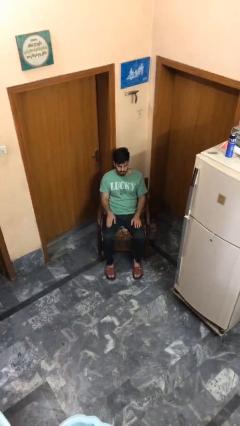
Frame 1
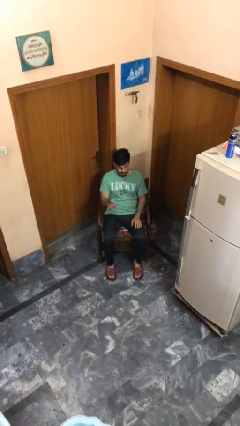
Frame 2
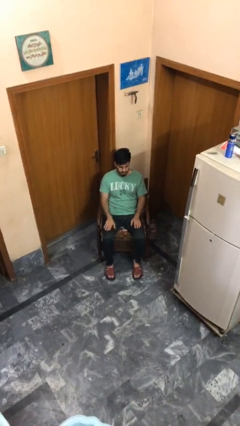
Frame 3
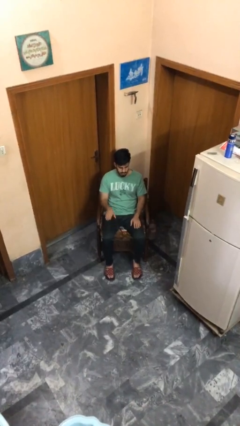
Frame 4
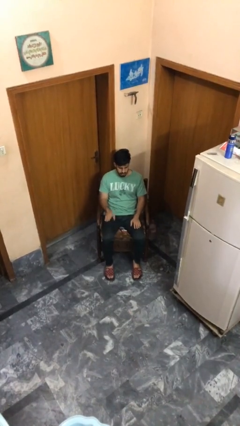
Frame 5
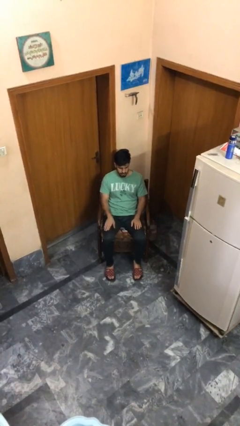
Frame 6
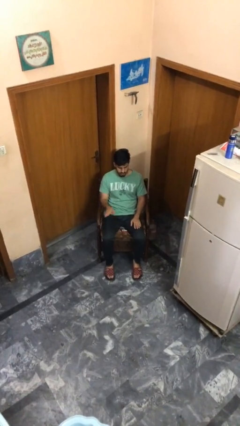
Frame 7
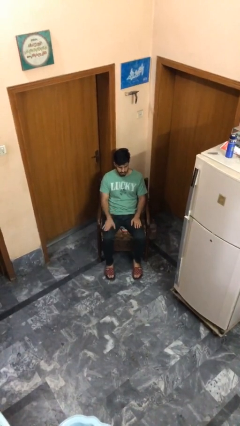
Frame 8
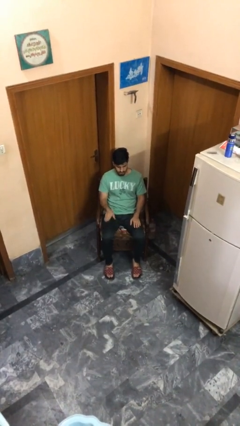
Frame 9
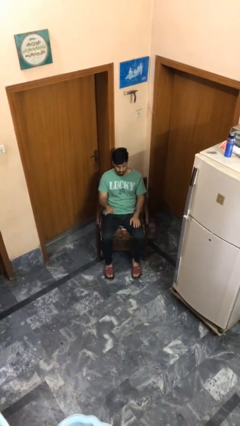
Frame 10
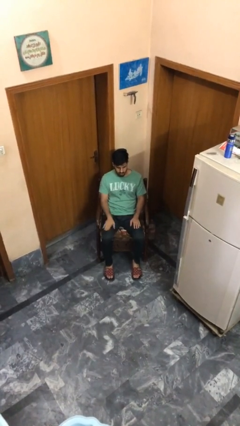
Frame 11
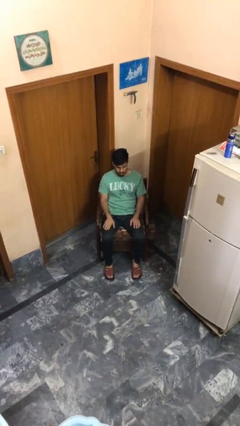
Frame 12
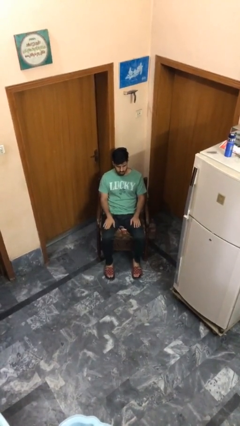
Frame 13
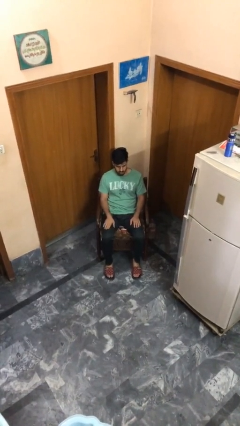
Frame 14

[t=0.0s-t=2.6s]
person slaps hands on thighs

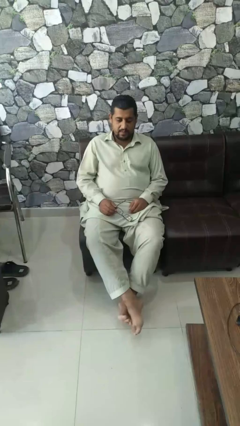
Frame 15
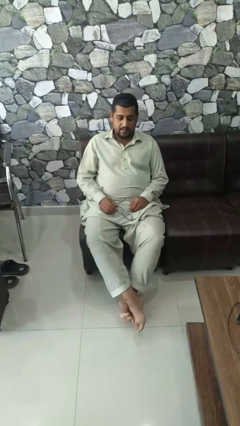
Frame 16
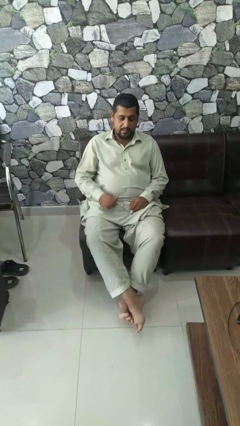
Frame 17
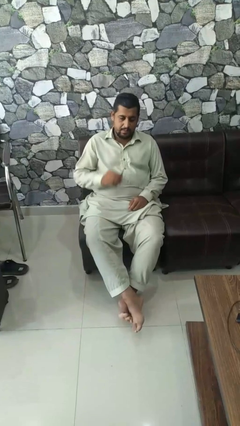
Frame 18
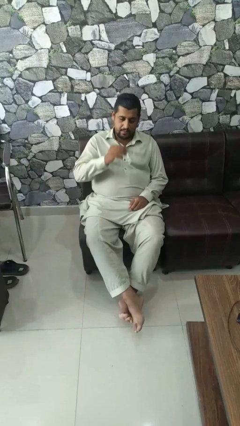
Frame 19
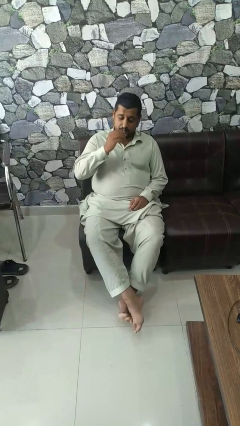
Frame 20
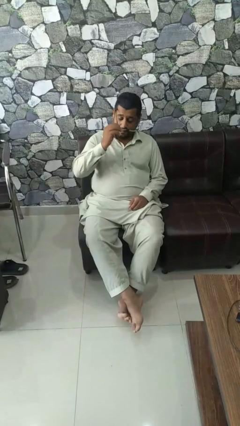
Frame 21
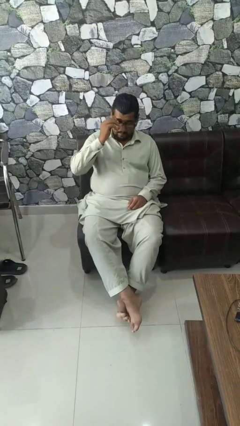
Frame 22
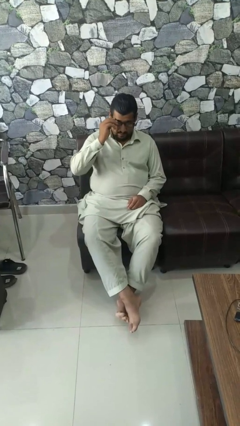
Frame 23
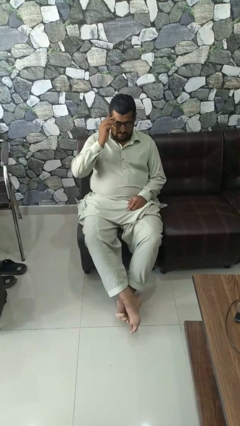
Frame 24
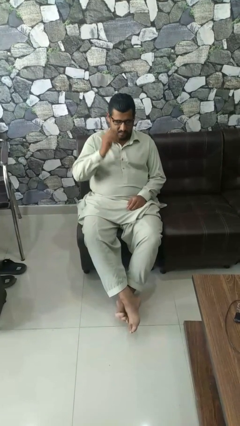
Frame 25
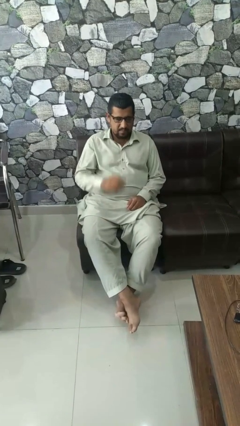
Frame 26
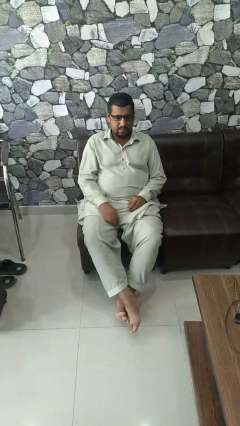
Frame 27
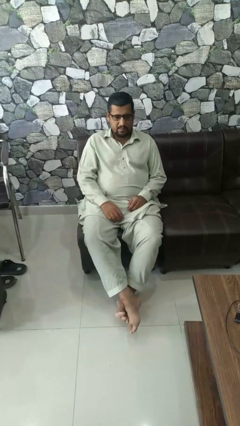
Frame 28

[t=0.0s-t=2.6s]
person puts on glasses

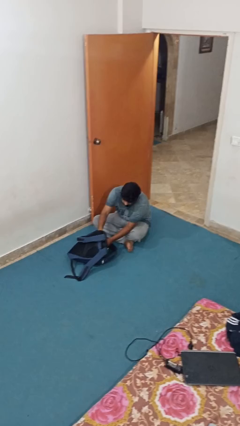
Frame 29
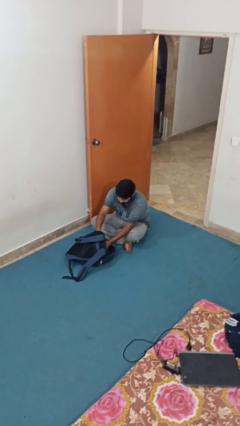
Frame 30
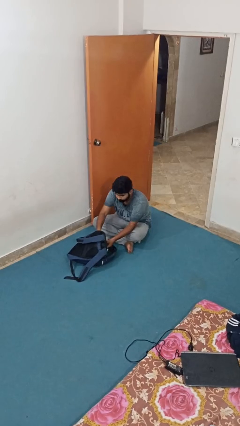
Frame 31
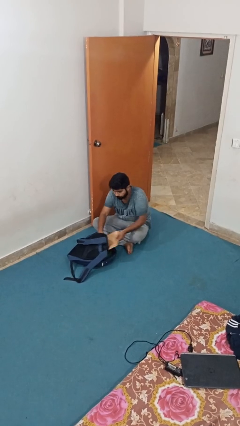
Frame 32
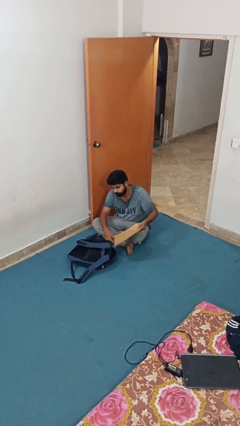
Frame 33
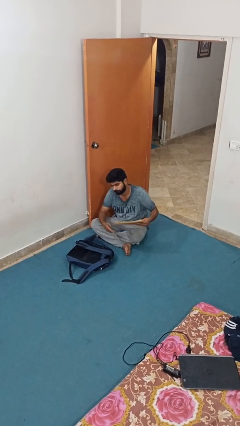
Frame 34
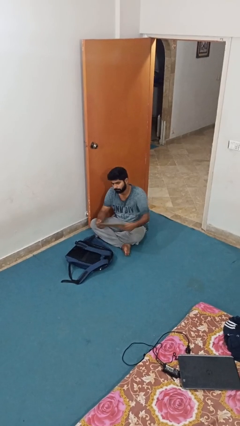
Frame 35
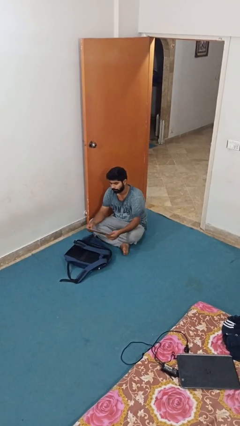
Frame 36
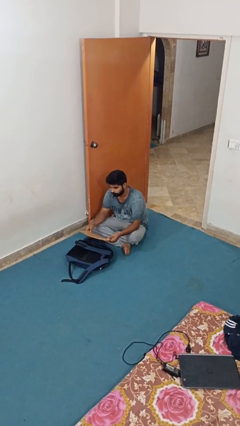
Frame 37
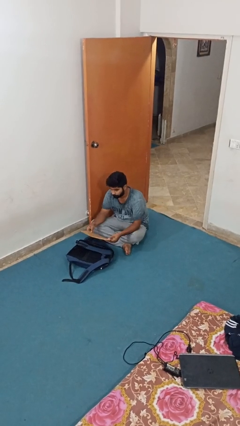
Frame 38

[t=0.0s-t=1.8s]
person takes object from backpack

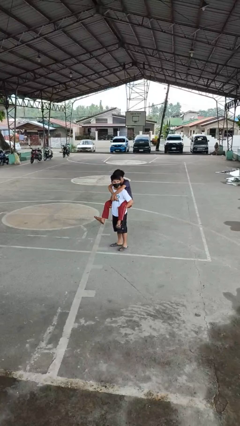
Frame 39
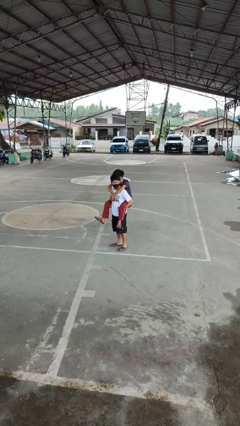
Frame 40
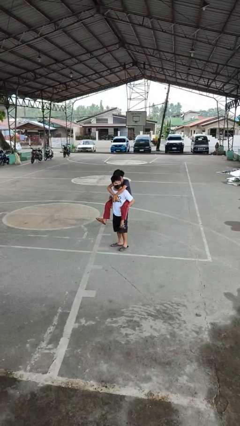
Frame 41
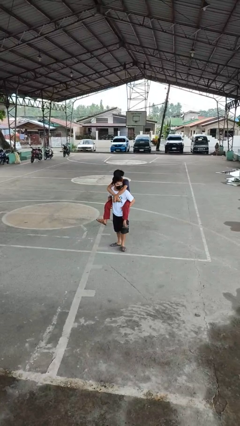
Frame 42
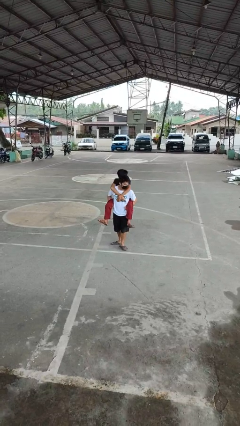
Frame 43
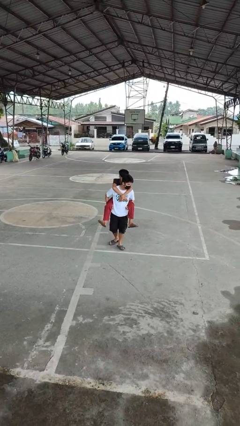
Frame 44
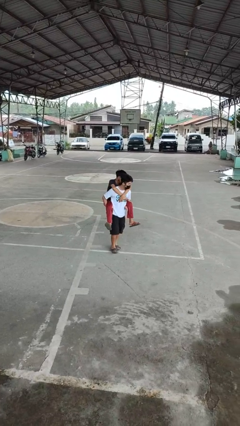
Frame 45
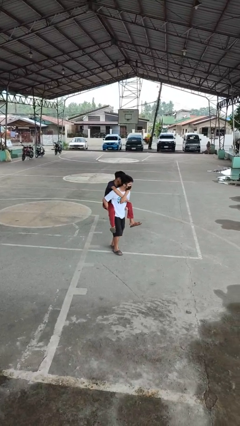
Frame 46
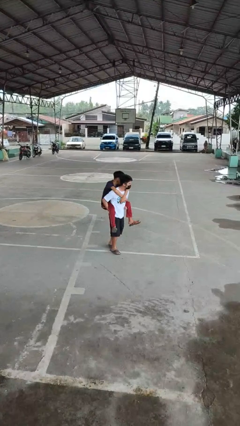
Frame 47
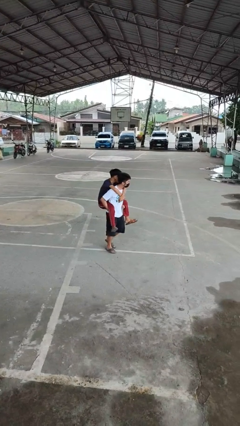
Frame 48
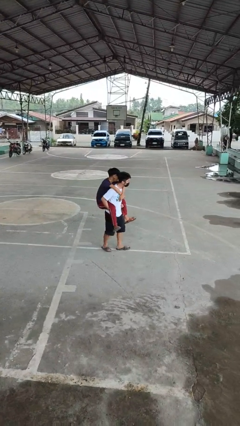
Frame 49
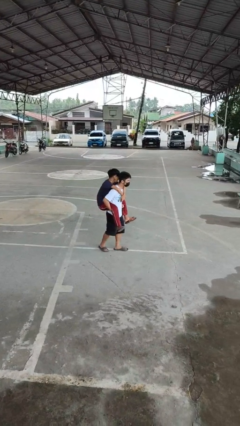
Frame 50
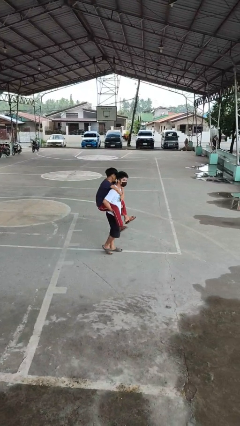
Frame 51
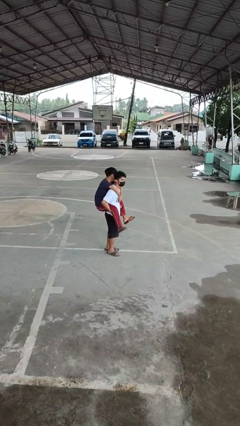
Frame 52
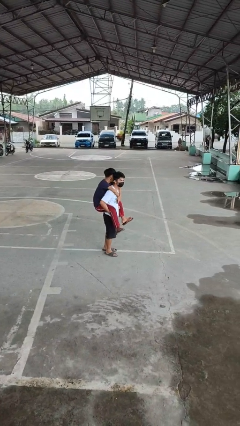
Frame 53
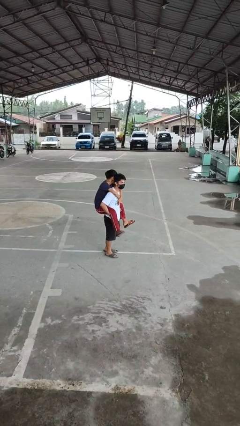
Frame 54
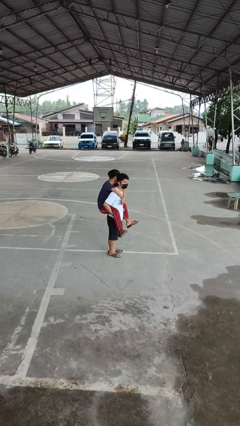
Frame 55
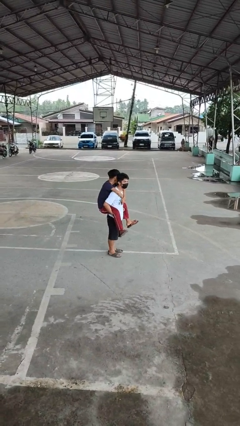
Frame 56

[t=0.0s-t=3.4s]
person carries person on back

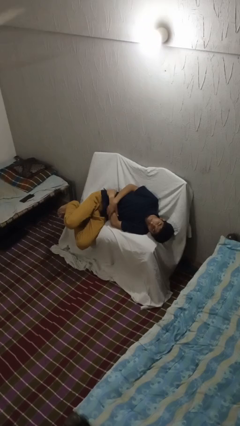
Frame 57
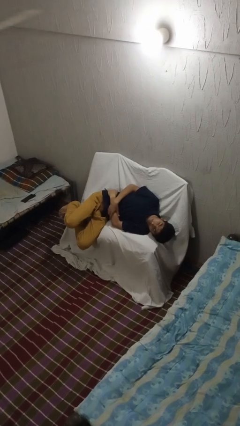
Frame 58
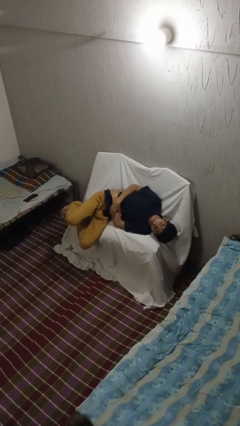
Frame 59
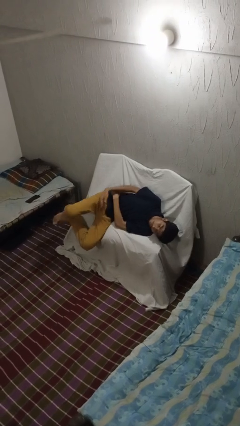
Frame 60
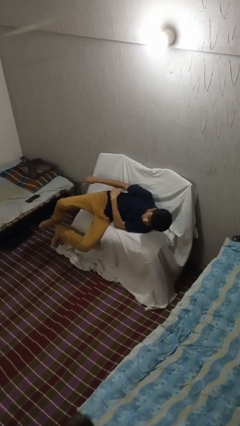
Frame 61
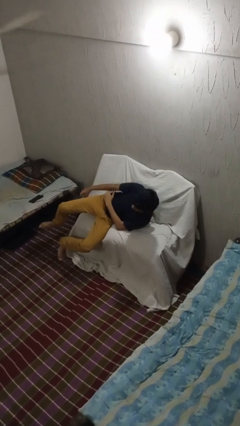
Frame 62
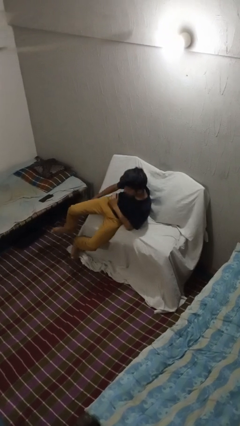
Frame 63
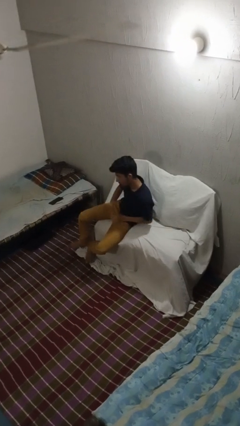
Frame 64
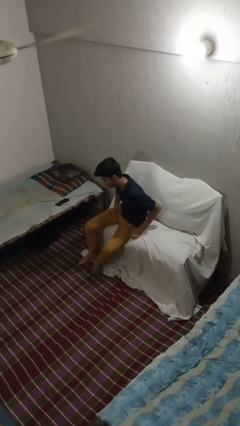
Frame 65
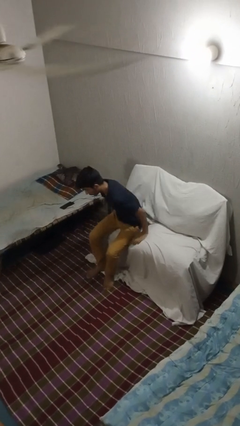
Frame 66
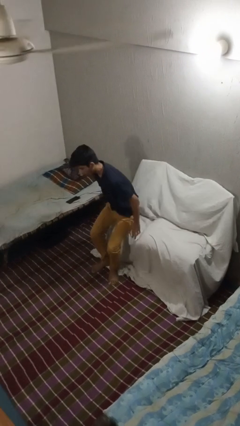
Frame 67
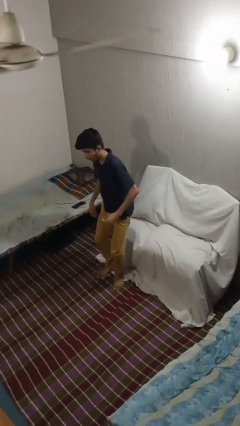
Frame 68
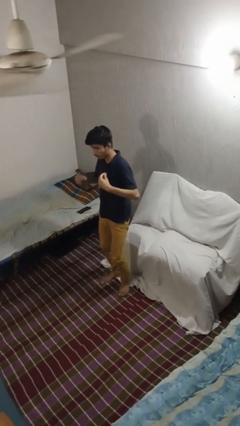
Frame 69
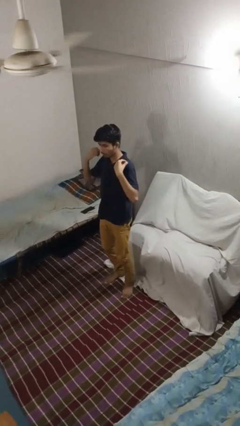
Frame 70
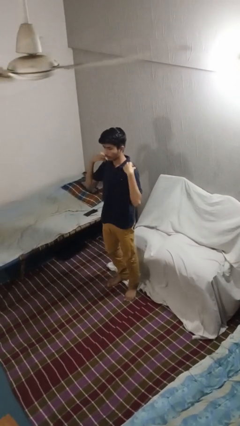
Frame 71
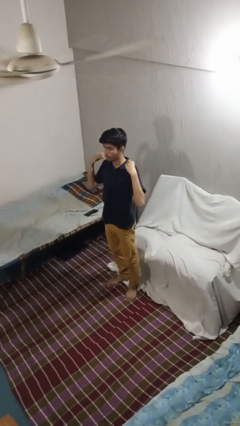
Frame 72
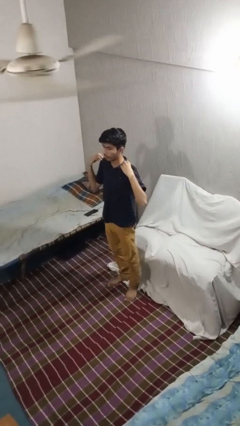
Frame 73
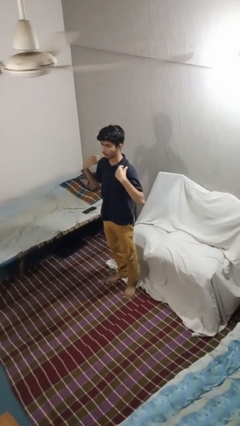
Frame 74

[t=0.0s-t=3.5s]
person stands up

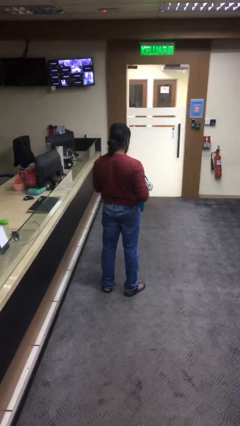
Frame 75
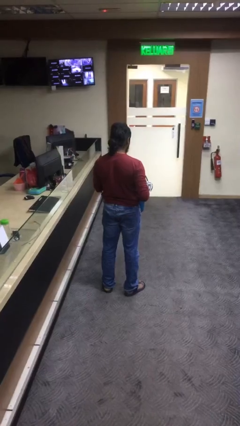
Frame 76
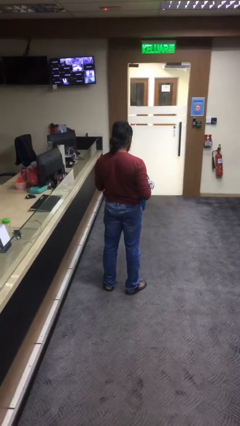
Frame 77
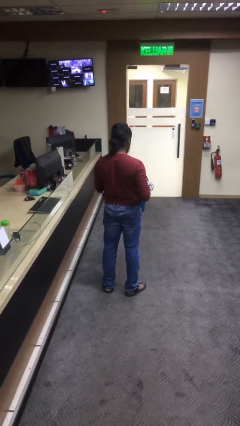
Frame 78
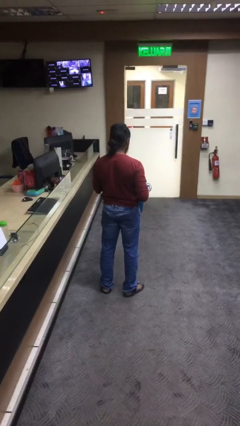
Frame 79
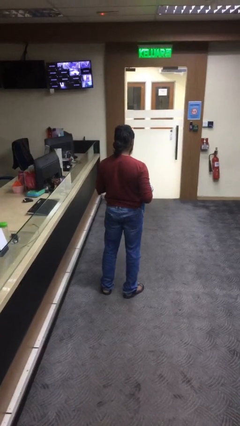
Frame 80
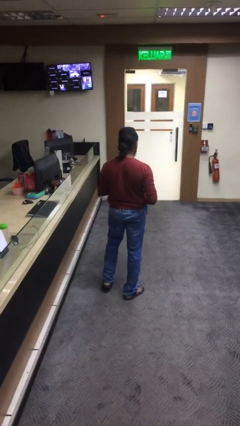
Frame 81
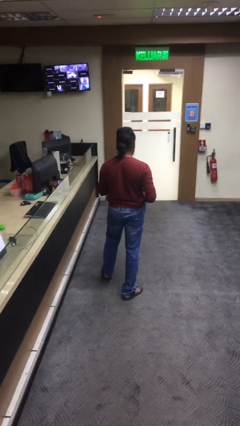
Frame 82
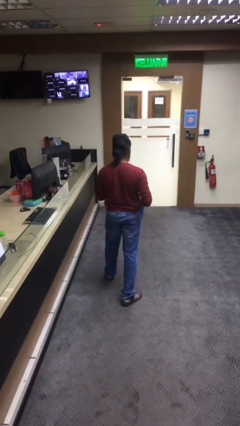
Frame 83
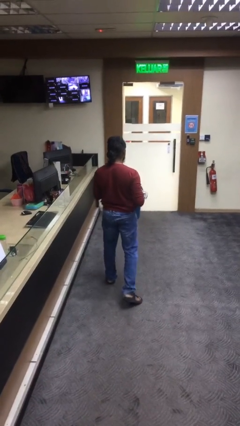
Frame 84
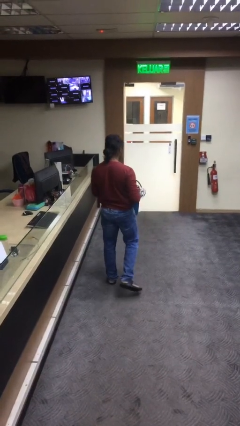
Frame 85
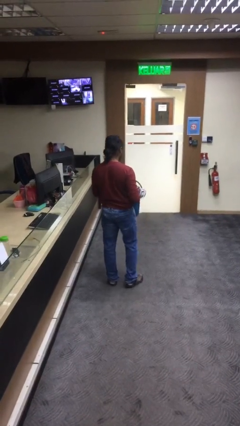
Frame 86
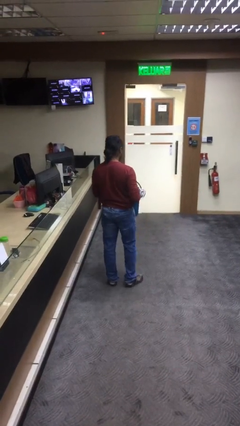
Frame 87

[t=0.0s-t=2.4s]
person carries laundry basket

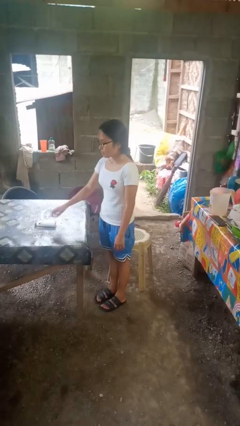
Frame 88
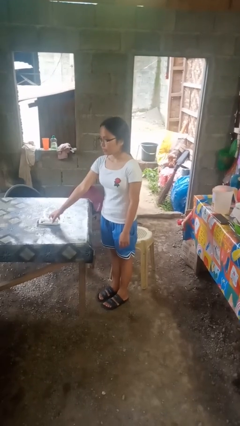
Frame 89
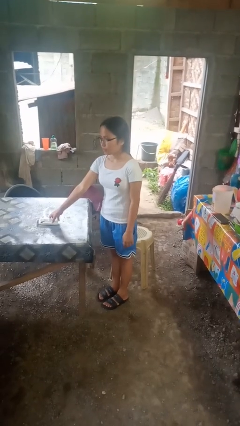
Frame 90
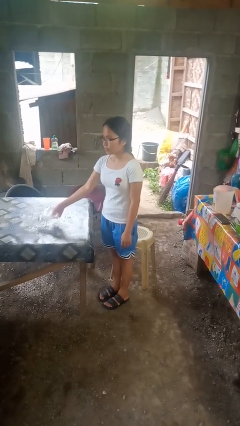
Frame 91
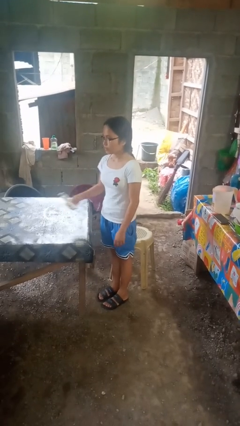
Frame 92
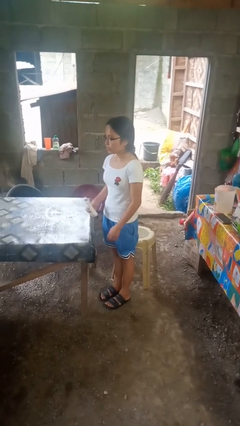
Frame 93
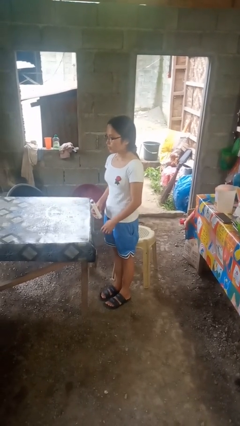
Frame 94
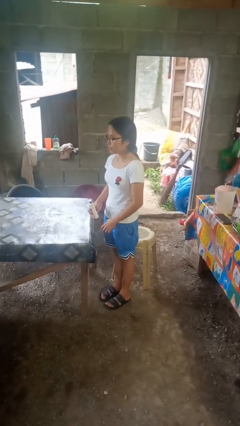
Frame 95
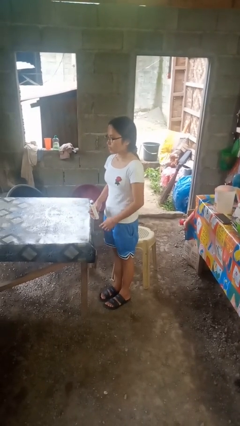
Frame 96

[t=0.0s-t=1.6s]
person picks up object from table
